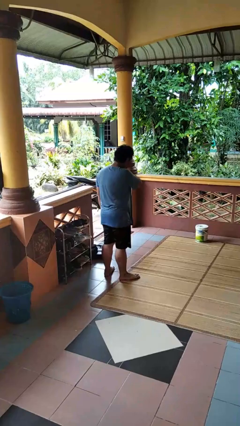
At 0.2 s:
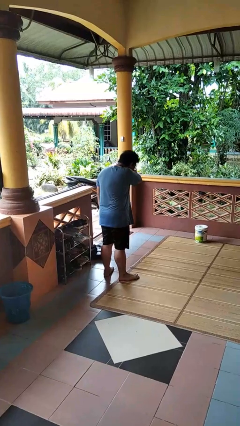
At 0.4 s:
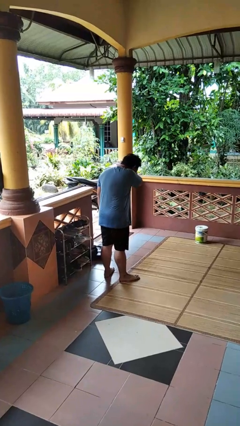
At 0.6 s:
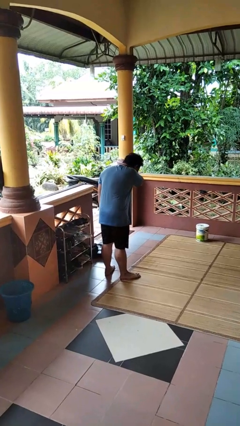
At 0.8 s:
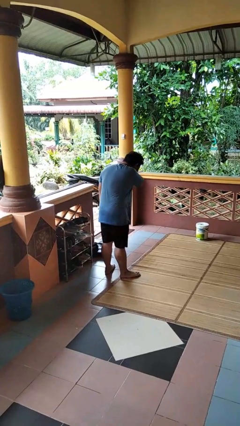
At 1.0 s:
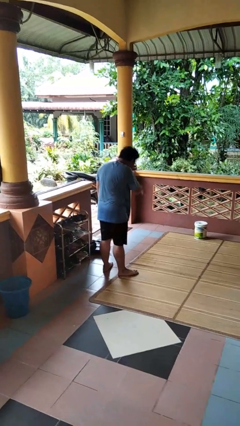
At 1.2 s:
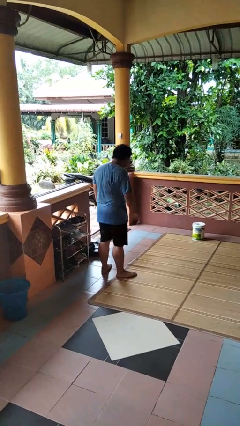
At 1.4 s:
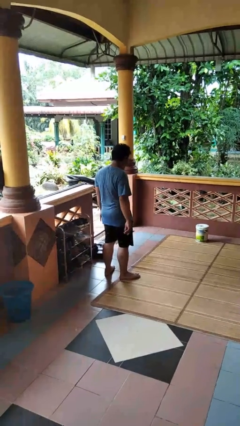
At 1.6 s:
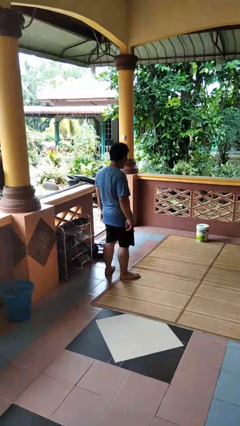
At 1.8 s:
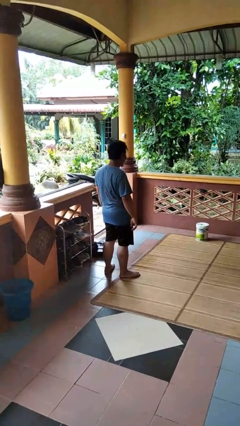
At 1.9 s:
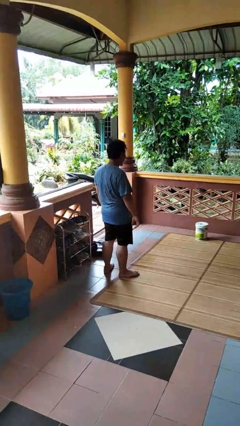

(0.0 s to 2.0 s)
person sneezes into hand

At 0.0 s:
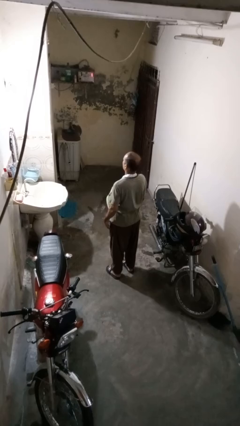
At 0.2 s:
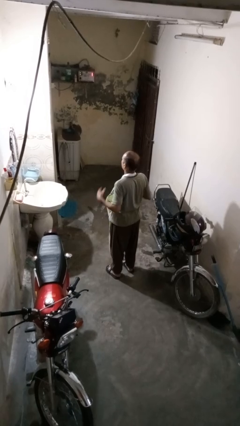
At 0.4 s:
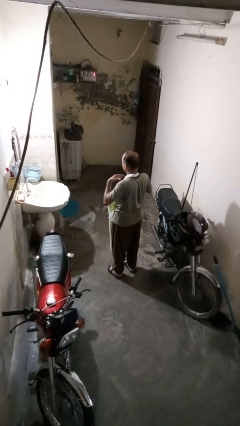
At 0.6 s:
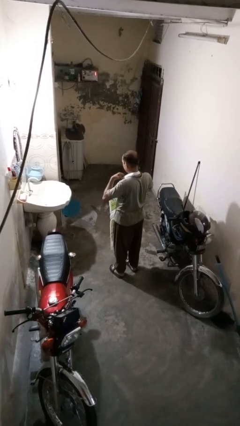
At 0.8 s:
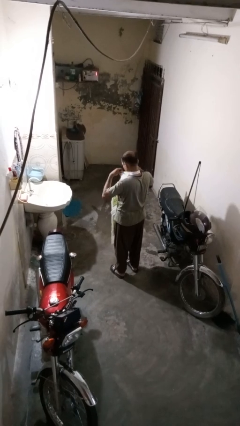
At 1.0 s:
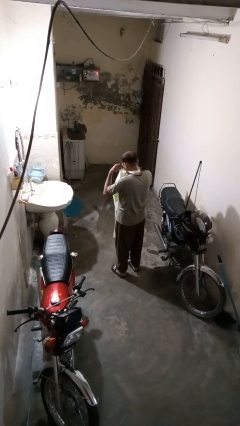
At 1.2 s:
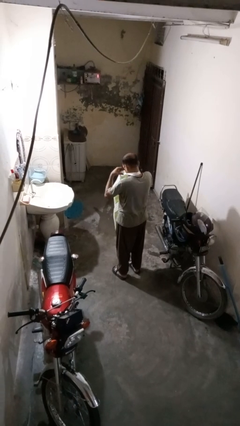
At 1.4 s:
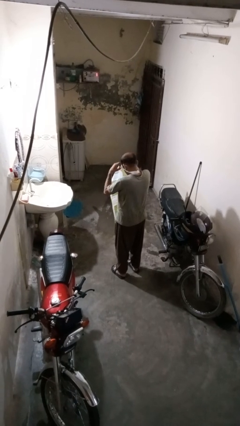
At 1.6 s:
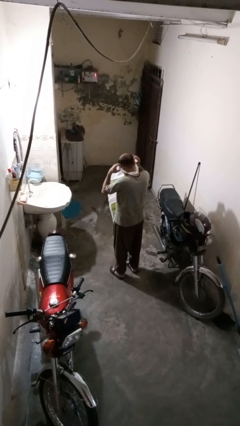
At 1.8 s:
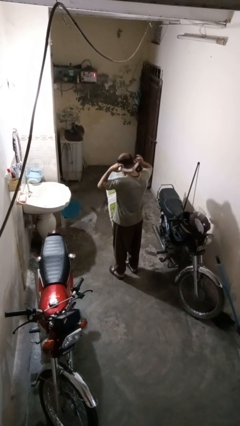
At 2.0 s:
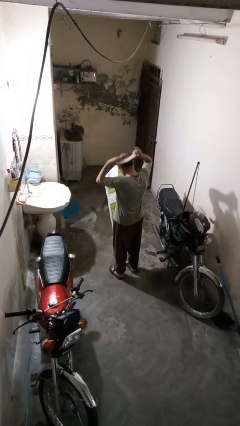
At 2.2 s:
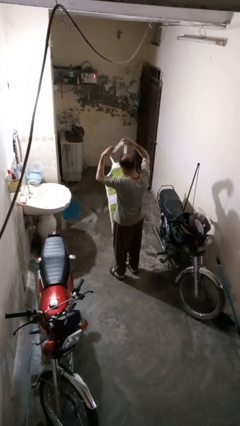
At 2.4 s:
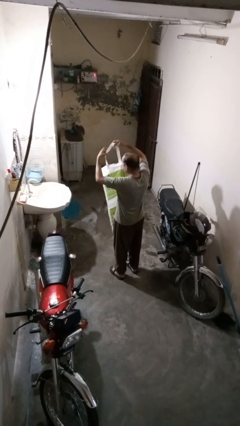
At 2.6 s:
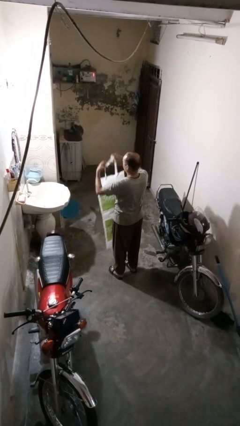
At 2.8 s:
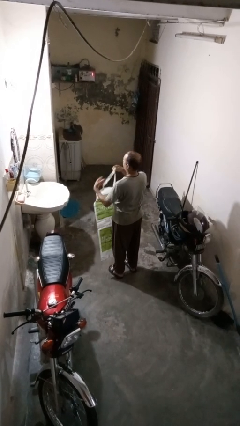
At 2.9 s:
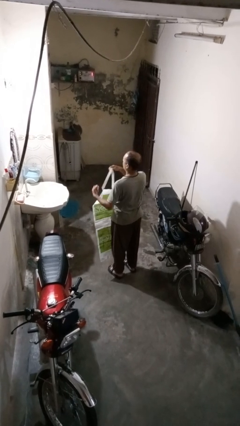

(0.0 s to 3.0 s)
person takes off apron

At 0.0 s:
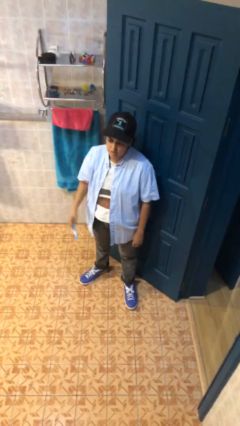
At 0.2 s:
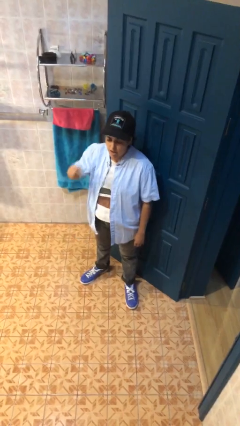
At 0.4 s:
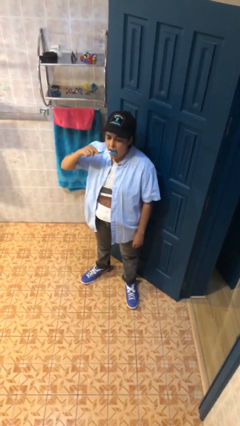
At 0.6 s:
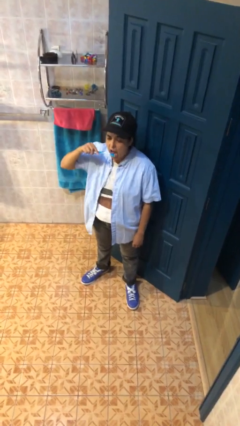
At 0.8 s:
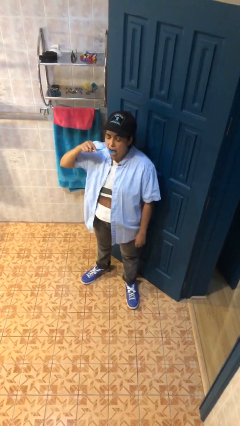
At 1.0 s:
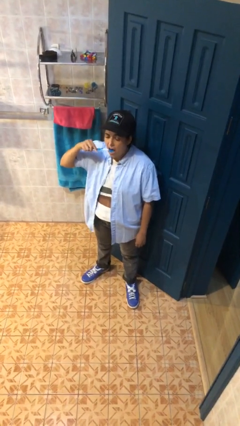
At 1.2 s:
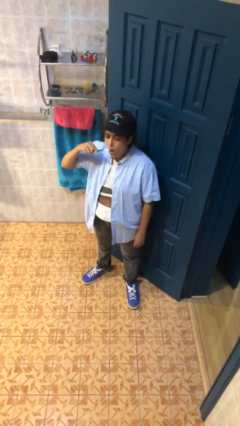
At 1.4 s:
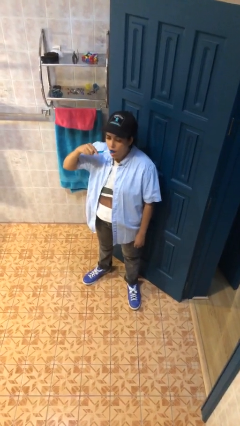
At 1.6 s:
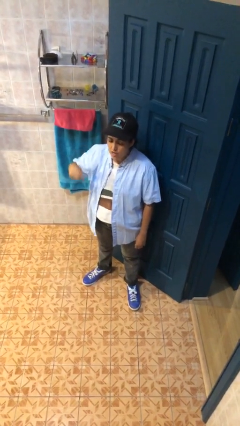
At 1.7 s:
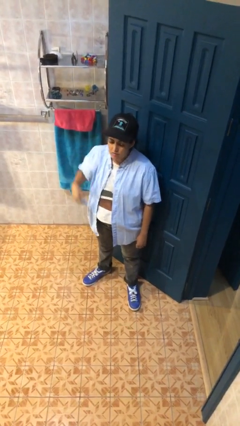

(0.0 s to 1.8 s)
person brushes teeth

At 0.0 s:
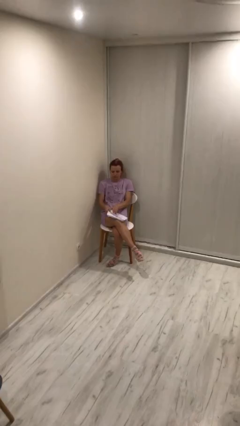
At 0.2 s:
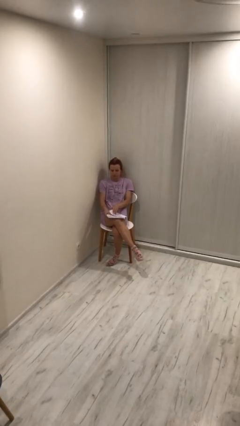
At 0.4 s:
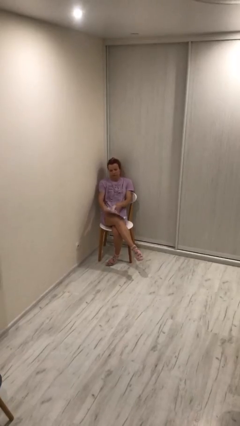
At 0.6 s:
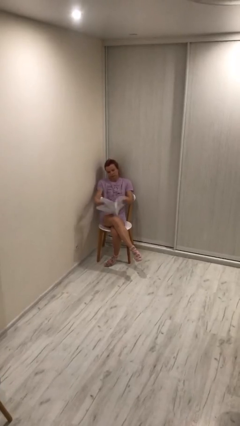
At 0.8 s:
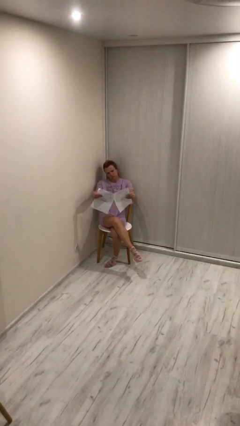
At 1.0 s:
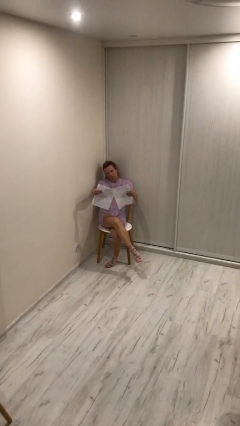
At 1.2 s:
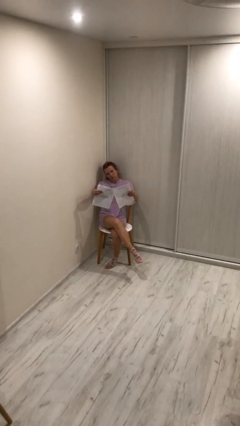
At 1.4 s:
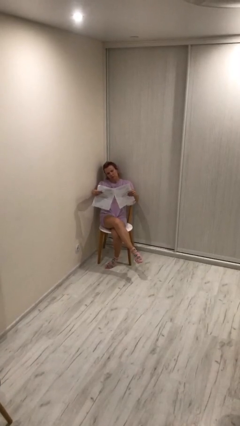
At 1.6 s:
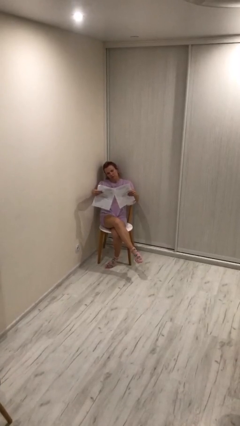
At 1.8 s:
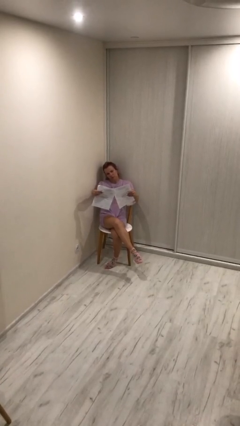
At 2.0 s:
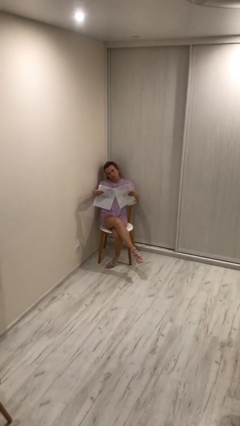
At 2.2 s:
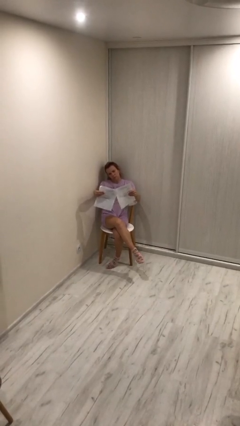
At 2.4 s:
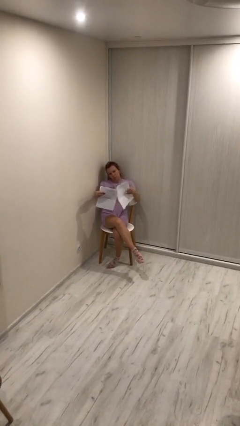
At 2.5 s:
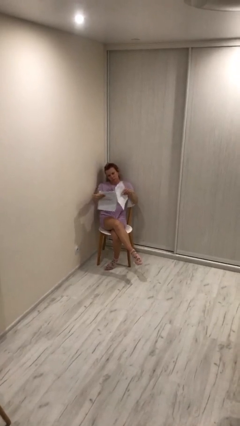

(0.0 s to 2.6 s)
person reads newspaper

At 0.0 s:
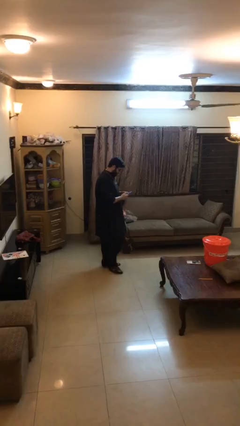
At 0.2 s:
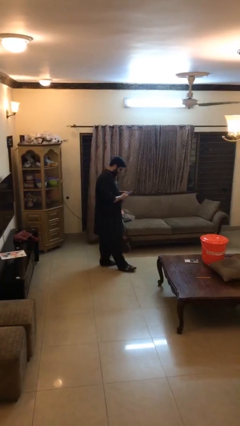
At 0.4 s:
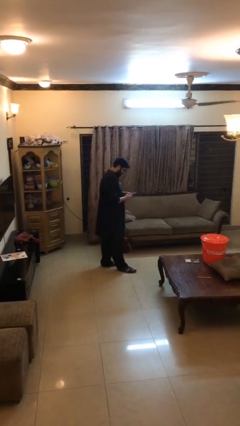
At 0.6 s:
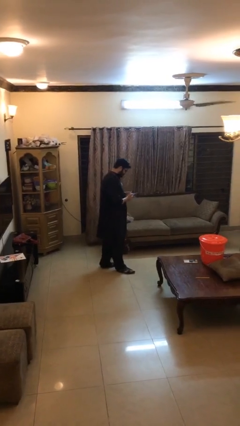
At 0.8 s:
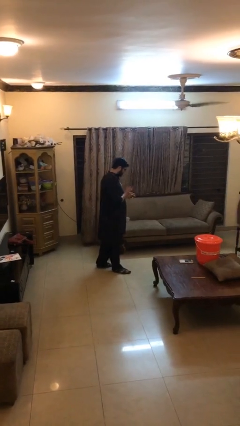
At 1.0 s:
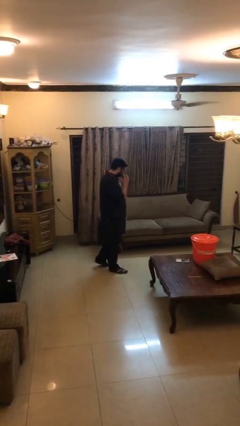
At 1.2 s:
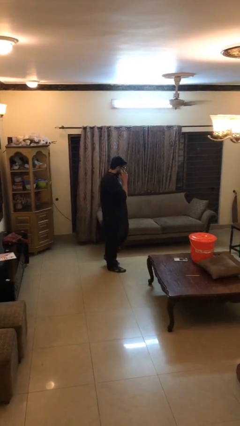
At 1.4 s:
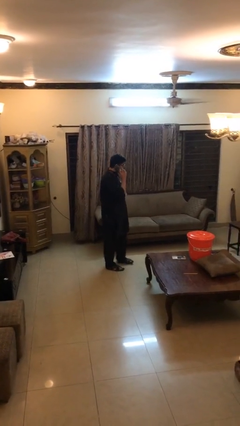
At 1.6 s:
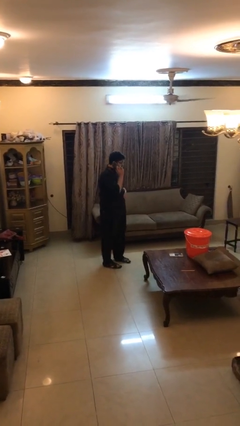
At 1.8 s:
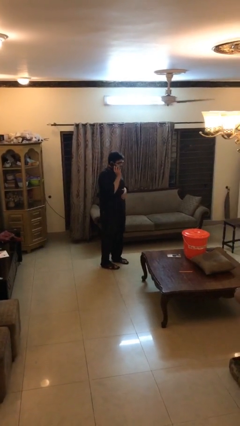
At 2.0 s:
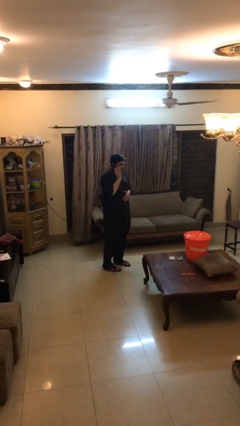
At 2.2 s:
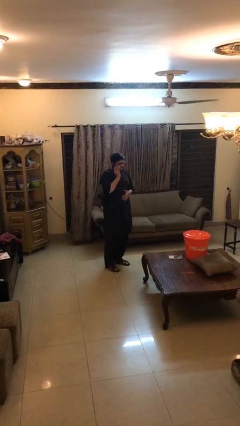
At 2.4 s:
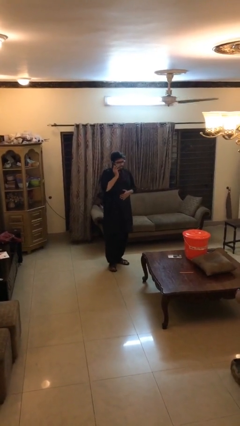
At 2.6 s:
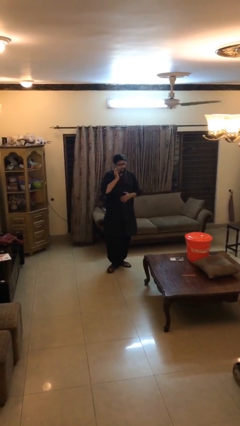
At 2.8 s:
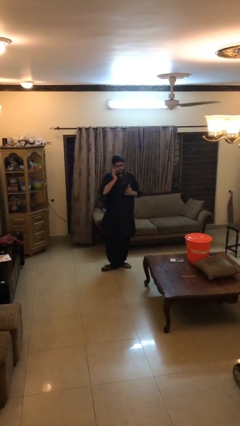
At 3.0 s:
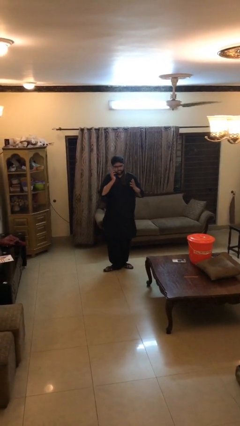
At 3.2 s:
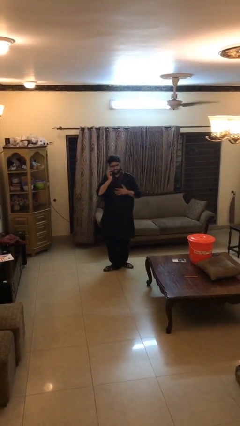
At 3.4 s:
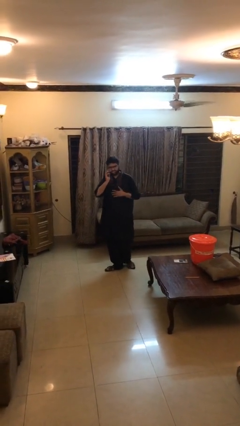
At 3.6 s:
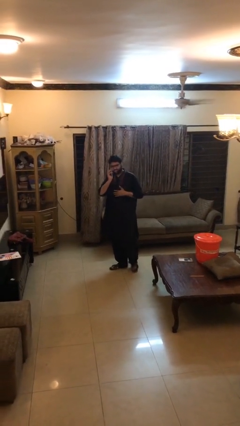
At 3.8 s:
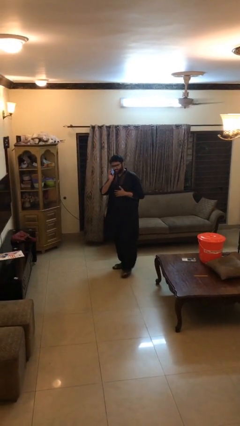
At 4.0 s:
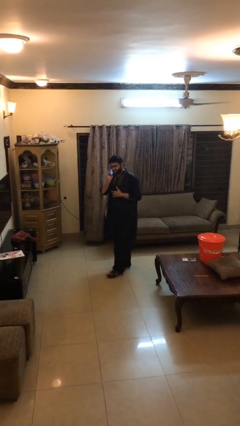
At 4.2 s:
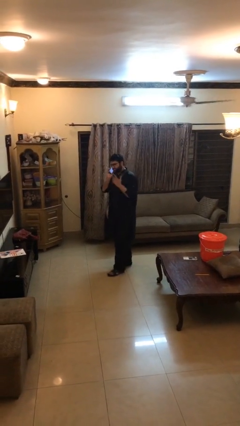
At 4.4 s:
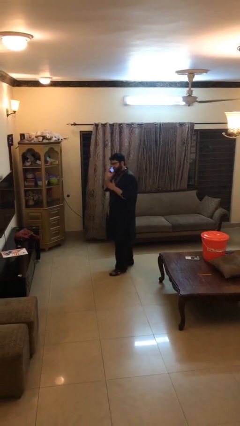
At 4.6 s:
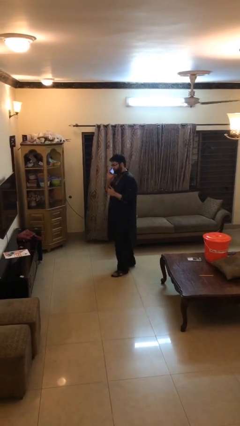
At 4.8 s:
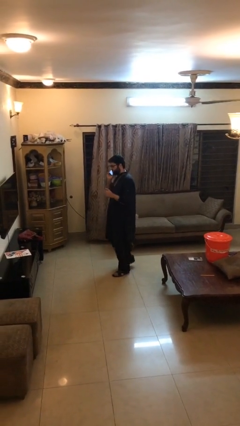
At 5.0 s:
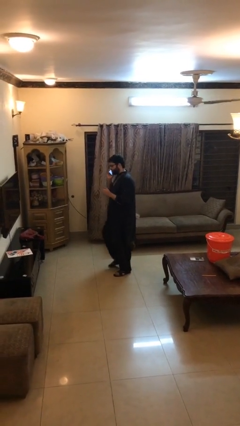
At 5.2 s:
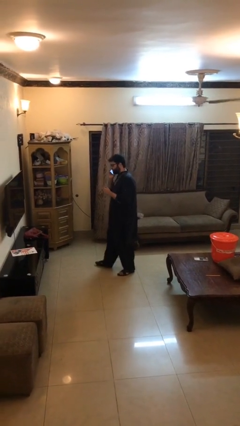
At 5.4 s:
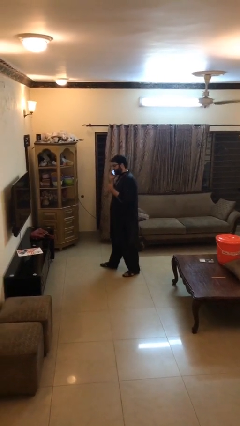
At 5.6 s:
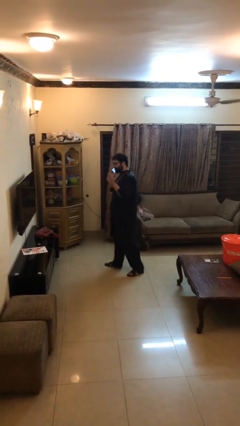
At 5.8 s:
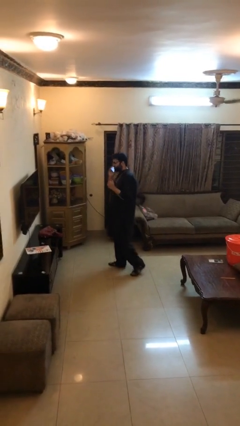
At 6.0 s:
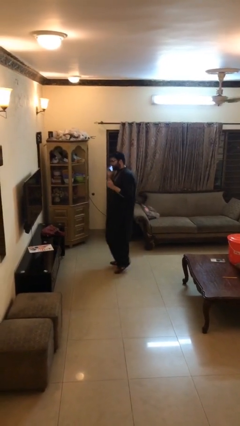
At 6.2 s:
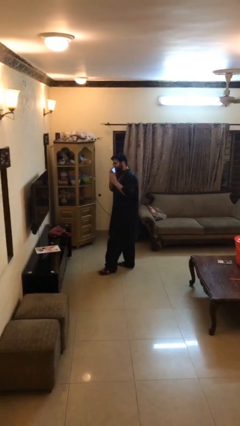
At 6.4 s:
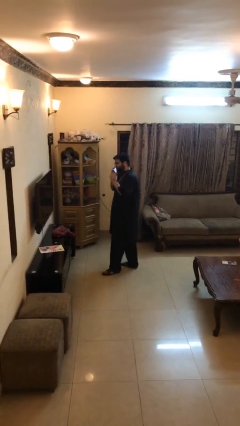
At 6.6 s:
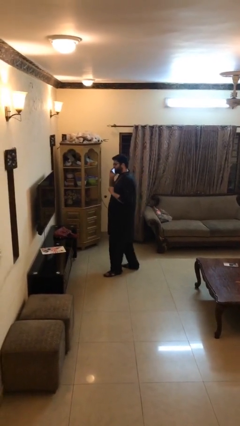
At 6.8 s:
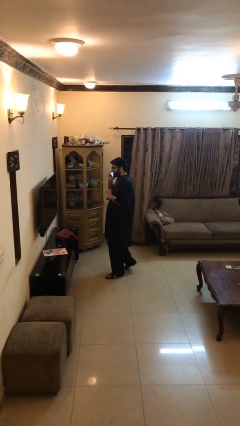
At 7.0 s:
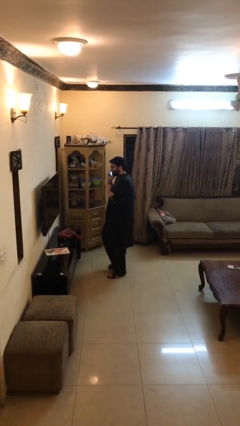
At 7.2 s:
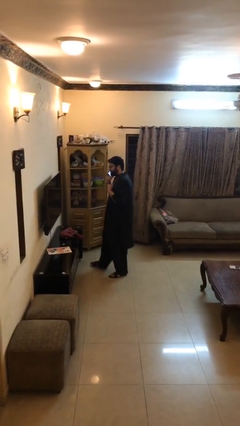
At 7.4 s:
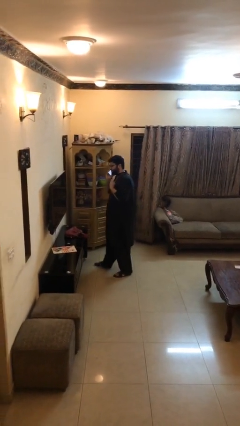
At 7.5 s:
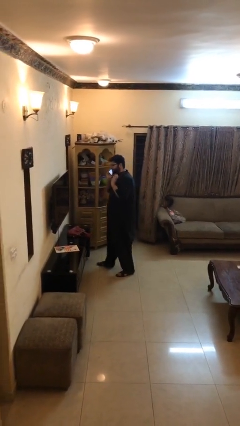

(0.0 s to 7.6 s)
person talks on phone
